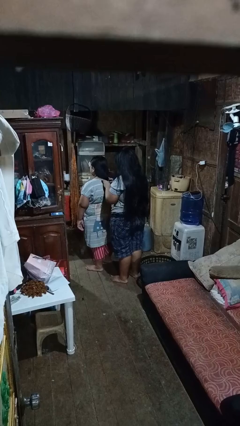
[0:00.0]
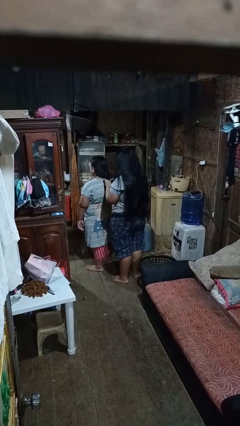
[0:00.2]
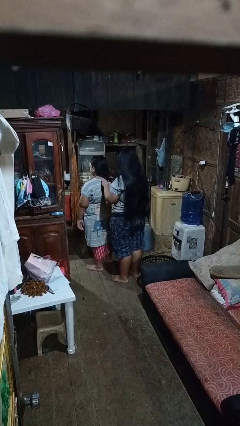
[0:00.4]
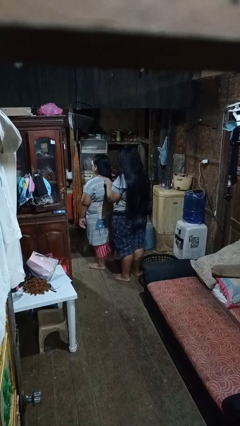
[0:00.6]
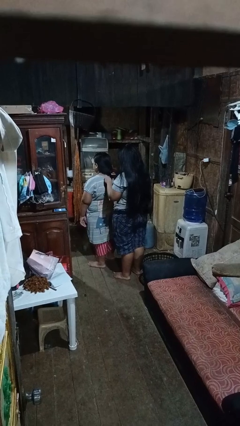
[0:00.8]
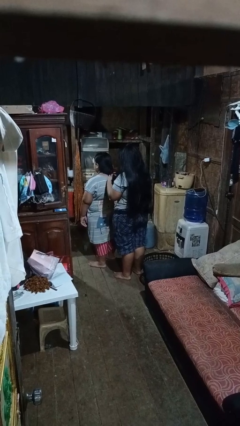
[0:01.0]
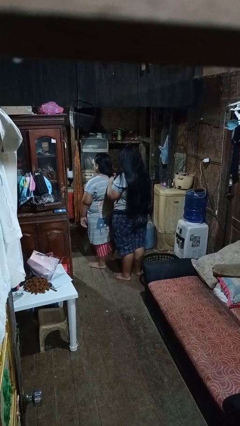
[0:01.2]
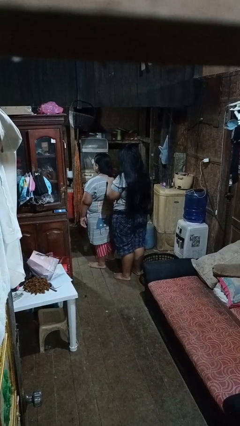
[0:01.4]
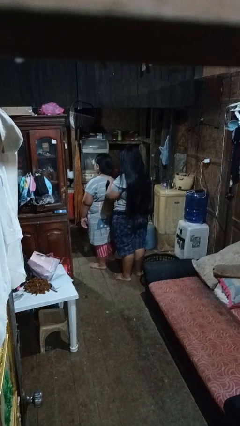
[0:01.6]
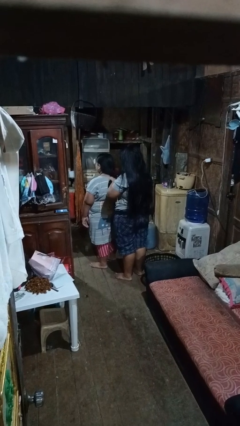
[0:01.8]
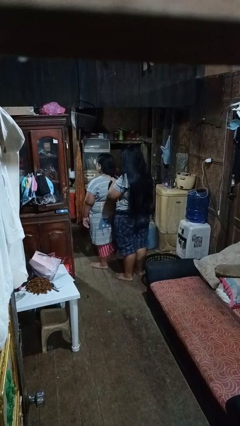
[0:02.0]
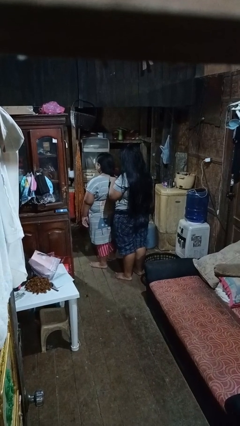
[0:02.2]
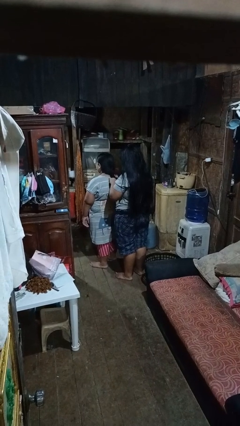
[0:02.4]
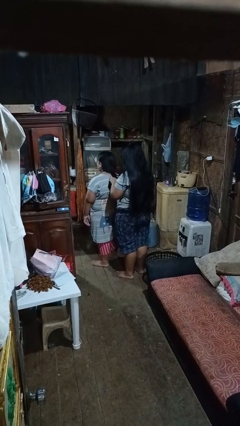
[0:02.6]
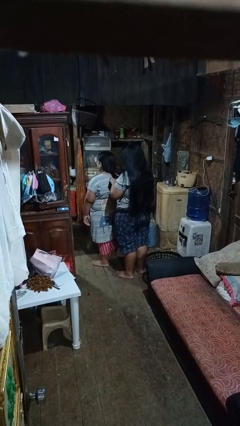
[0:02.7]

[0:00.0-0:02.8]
person braids hair of person

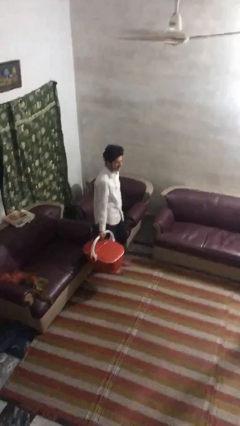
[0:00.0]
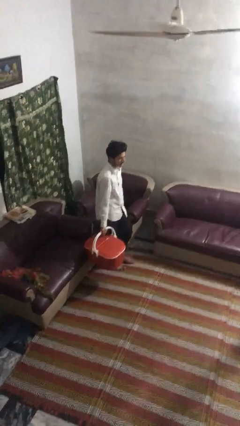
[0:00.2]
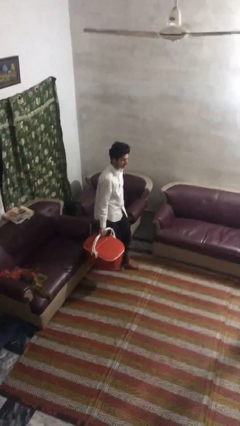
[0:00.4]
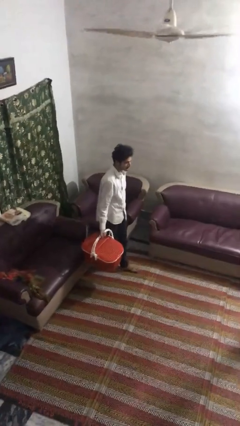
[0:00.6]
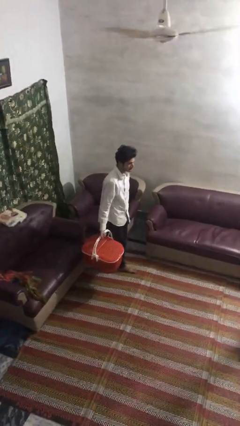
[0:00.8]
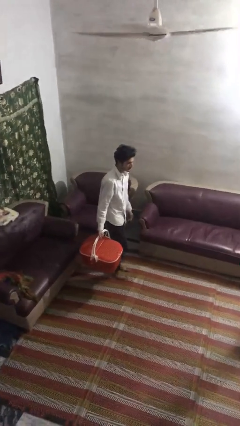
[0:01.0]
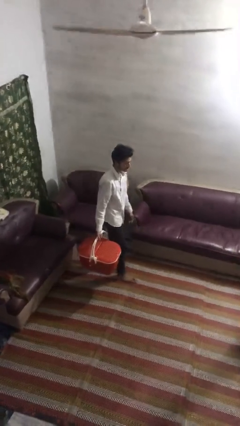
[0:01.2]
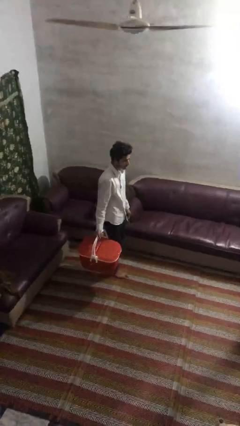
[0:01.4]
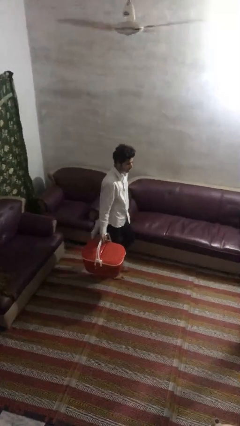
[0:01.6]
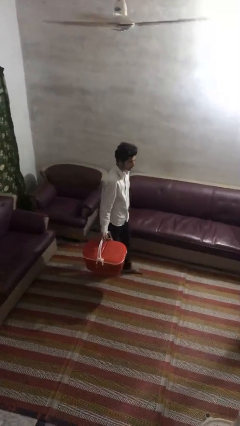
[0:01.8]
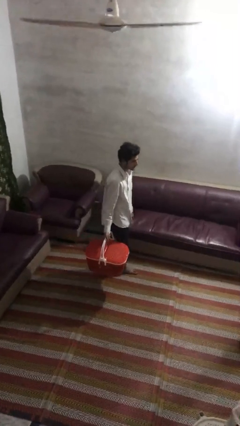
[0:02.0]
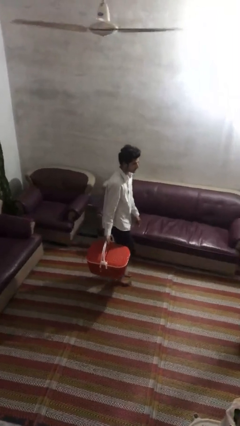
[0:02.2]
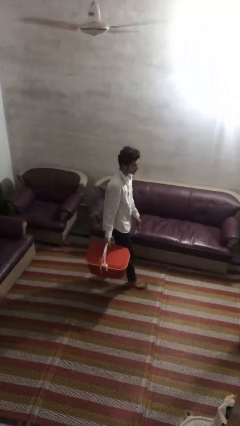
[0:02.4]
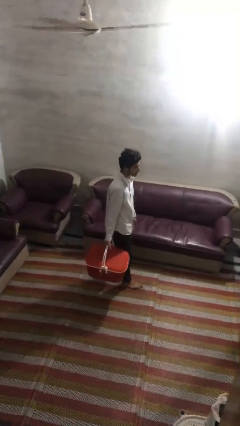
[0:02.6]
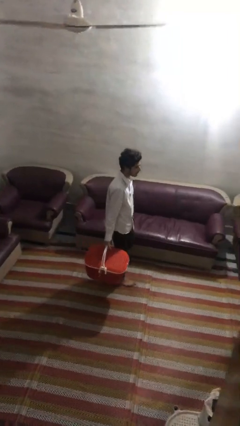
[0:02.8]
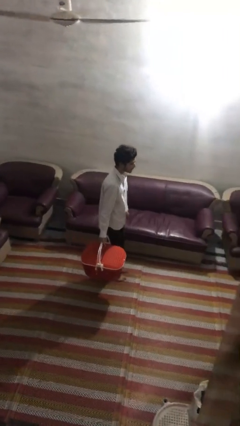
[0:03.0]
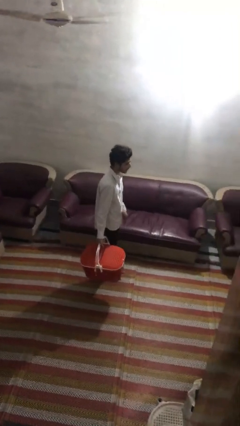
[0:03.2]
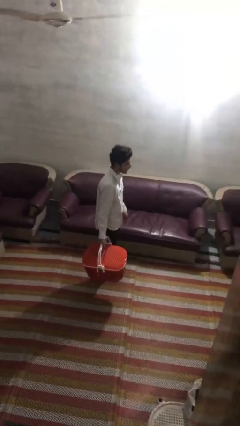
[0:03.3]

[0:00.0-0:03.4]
person carries laundry basket

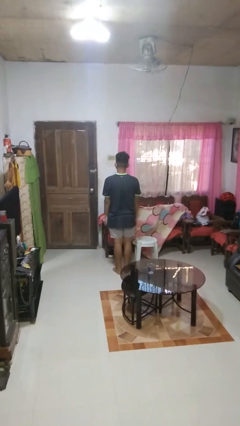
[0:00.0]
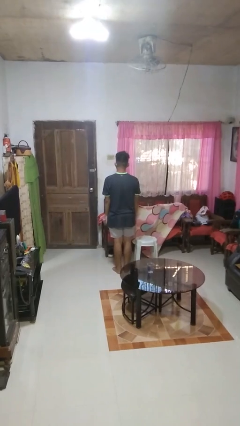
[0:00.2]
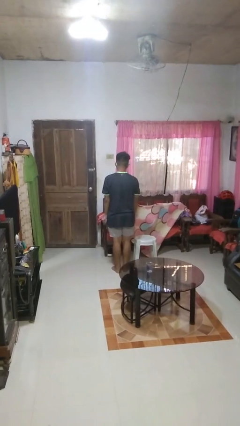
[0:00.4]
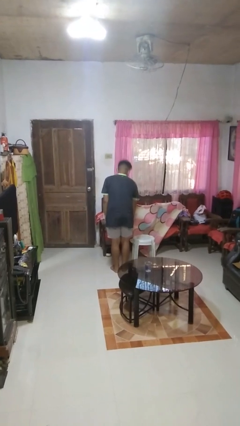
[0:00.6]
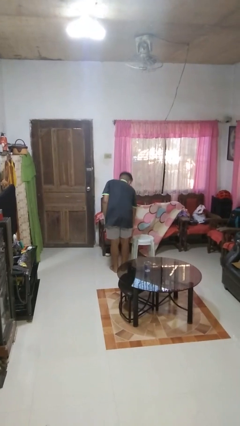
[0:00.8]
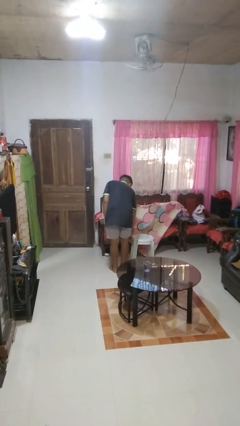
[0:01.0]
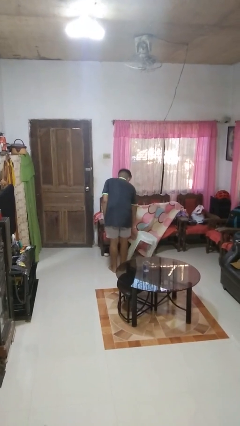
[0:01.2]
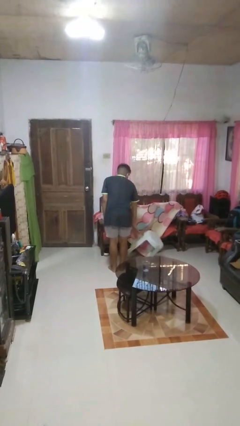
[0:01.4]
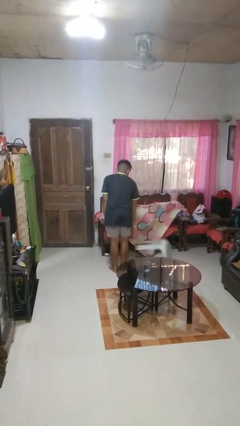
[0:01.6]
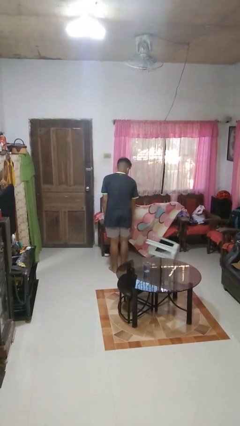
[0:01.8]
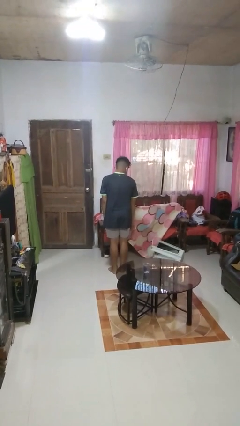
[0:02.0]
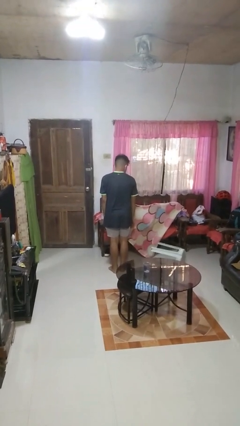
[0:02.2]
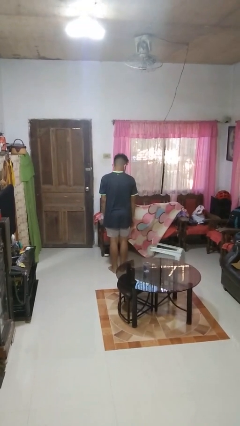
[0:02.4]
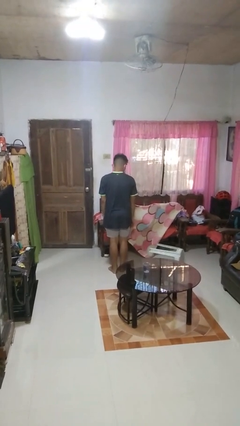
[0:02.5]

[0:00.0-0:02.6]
person knocks over furniture

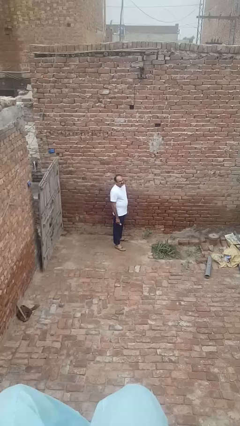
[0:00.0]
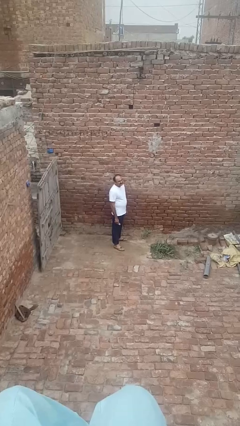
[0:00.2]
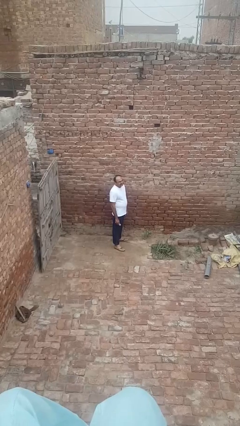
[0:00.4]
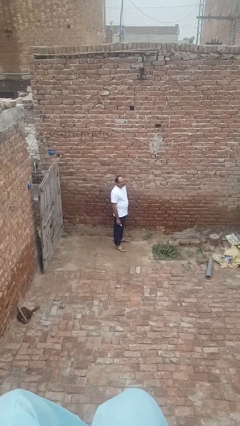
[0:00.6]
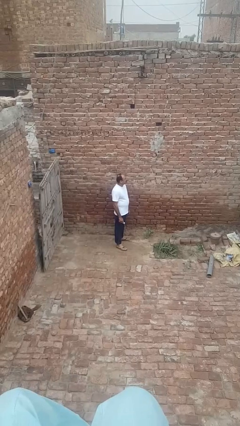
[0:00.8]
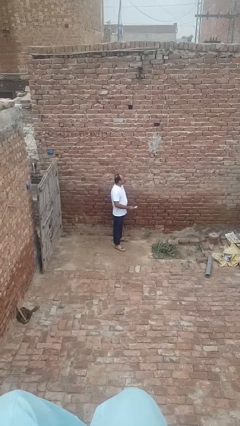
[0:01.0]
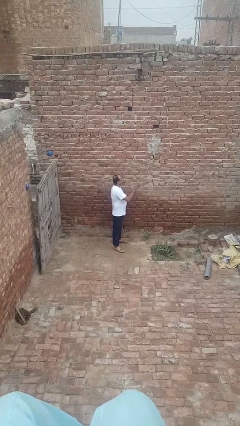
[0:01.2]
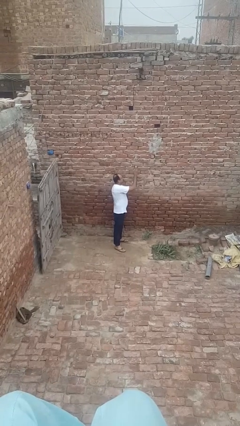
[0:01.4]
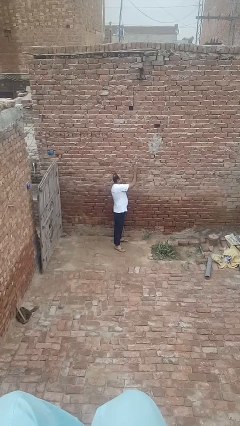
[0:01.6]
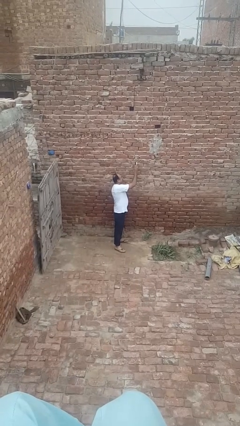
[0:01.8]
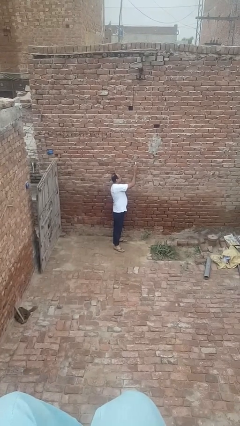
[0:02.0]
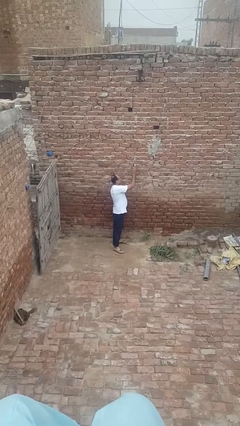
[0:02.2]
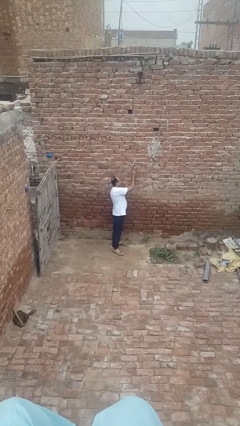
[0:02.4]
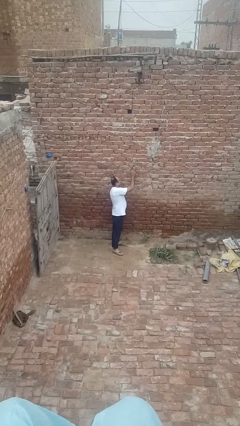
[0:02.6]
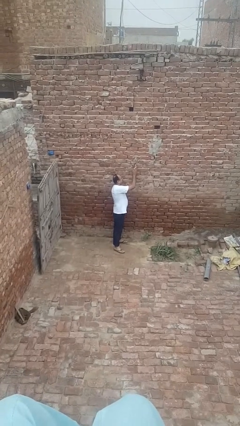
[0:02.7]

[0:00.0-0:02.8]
person adjusts thermostat

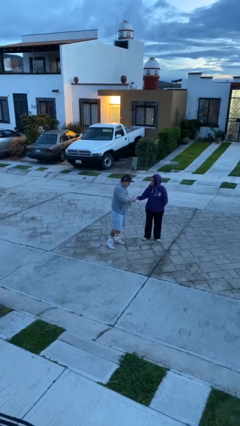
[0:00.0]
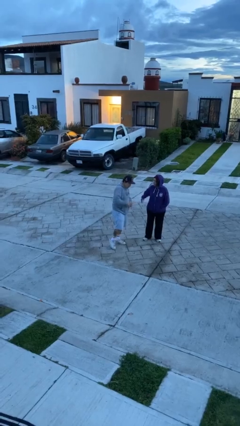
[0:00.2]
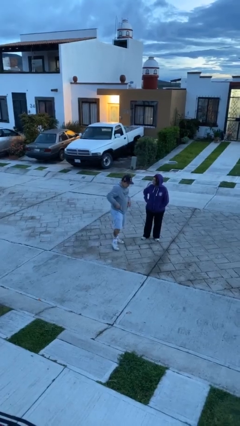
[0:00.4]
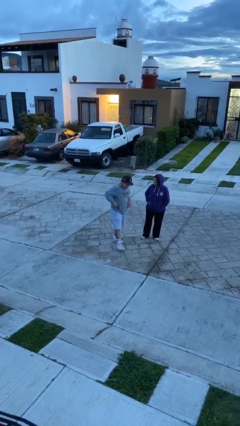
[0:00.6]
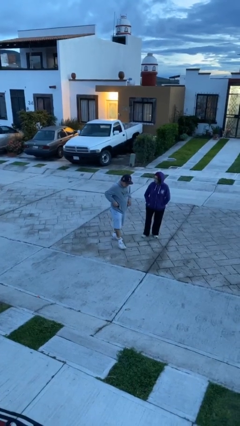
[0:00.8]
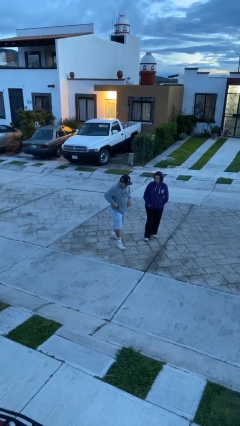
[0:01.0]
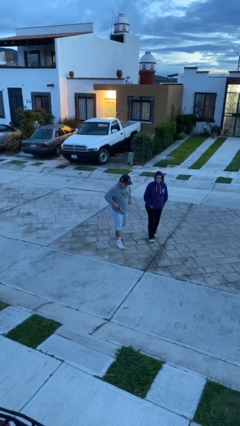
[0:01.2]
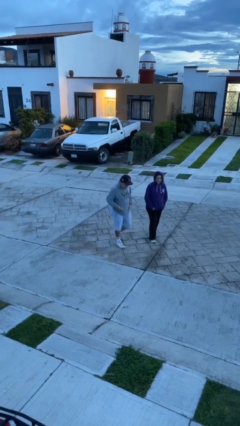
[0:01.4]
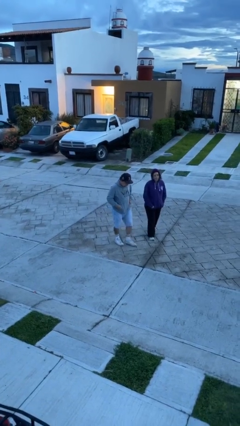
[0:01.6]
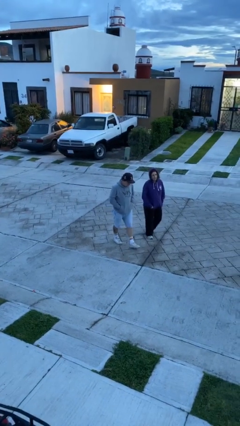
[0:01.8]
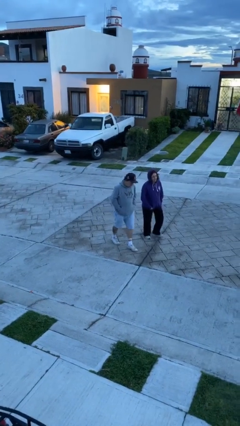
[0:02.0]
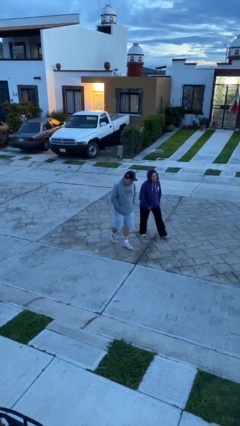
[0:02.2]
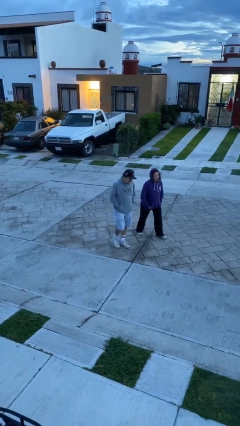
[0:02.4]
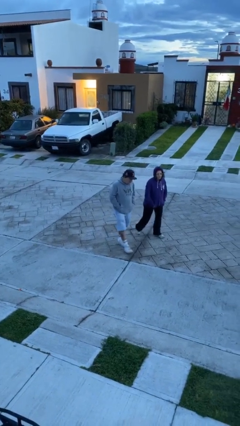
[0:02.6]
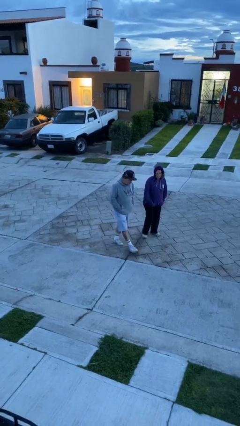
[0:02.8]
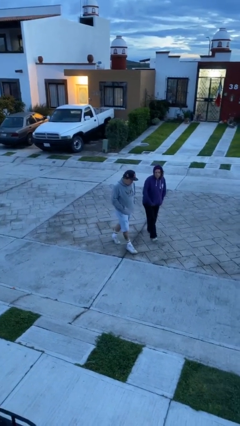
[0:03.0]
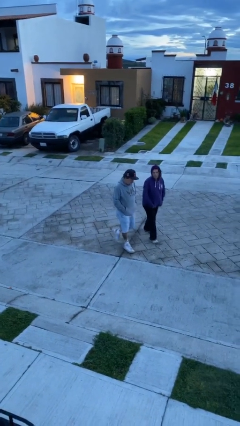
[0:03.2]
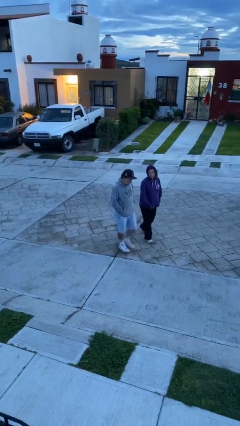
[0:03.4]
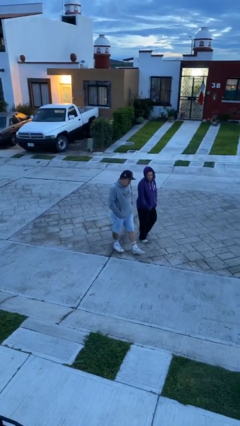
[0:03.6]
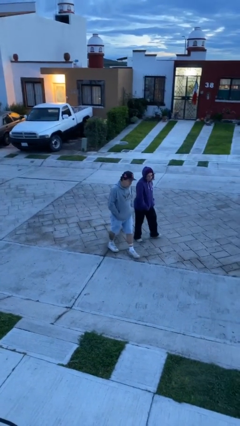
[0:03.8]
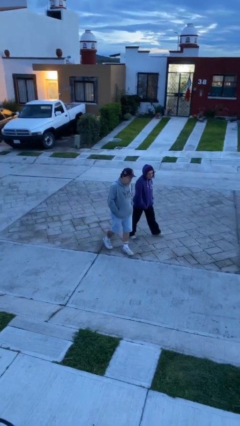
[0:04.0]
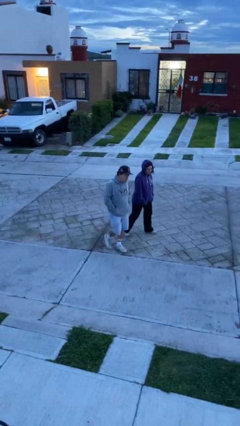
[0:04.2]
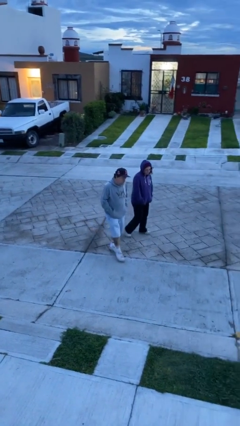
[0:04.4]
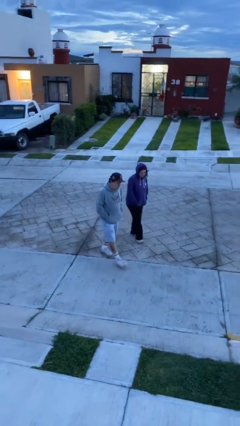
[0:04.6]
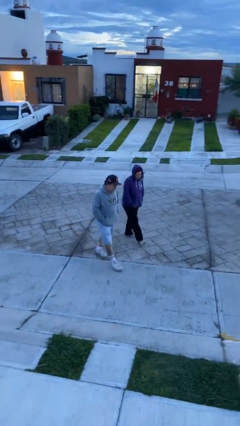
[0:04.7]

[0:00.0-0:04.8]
person talks to person

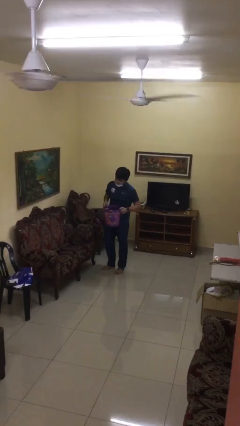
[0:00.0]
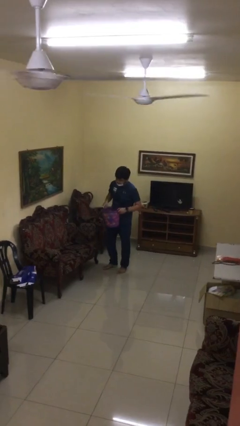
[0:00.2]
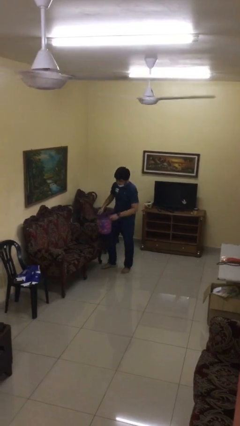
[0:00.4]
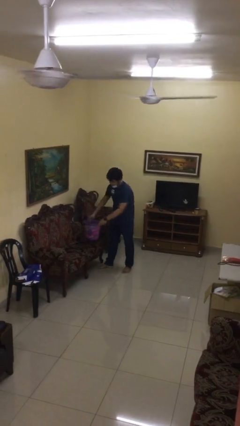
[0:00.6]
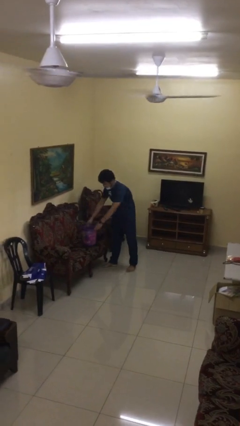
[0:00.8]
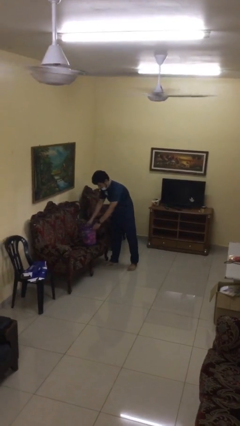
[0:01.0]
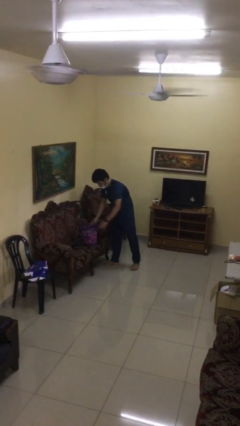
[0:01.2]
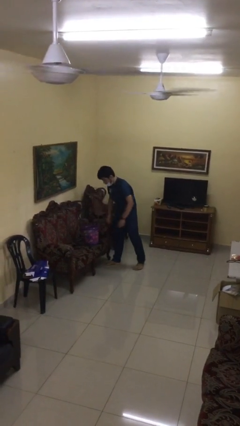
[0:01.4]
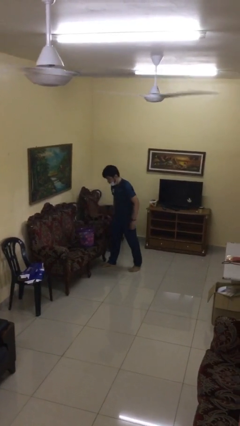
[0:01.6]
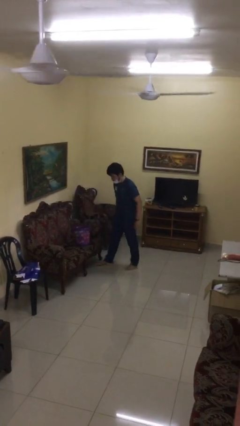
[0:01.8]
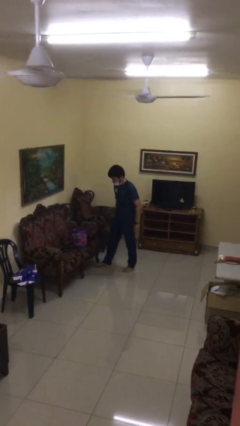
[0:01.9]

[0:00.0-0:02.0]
person puts down object on couch
